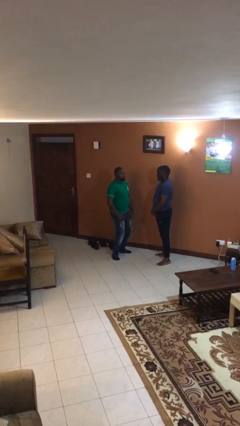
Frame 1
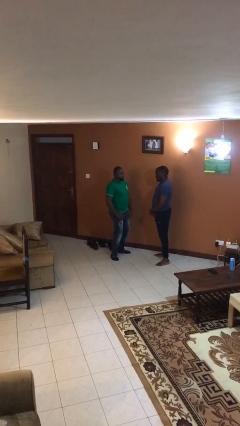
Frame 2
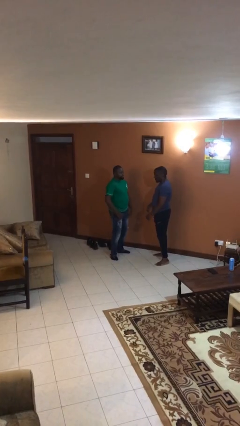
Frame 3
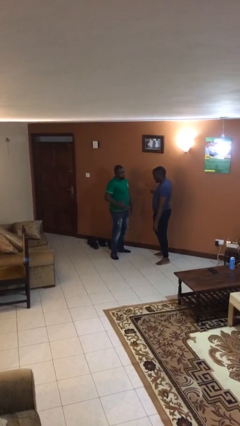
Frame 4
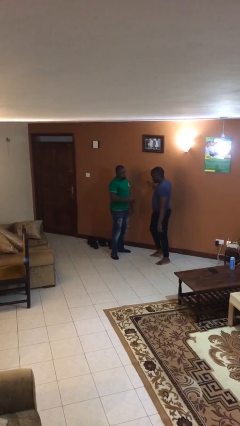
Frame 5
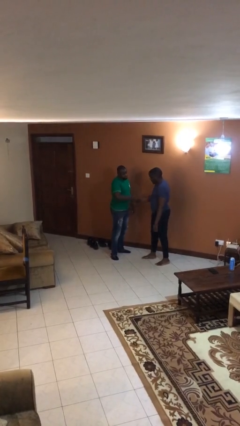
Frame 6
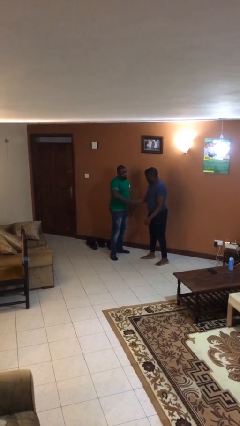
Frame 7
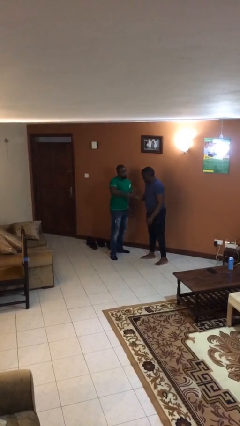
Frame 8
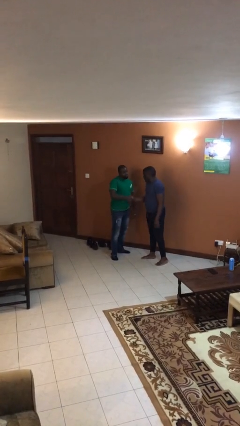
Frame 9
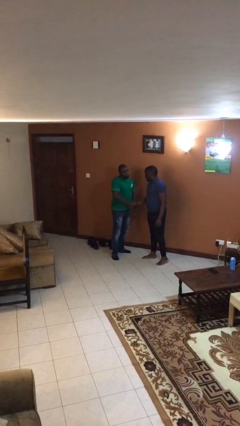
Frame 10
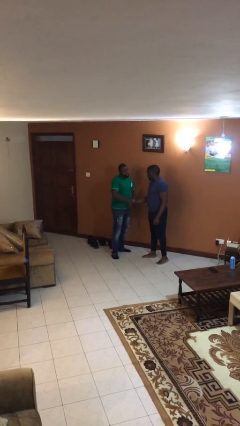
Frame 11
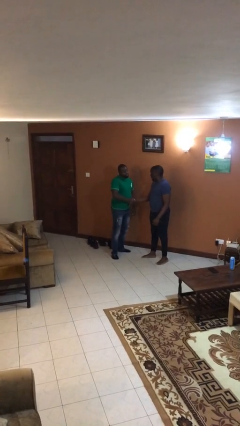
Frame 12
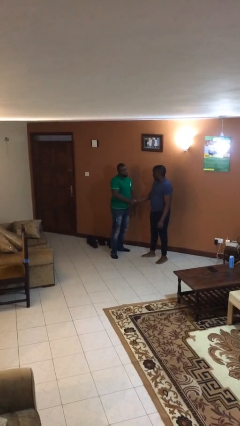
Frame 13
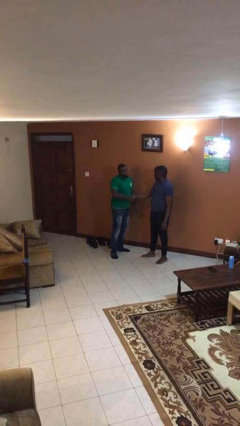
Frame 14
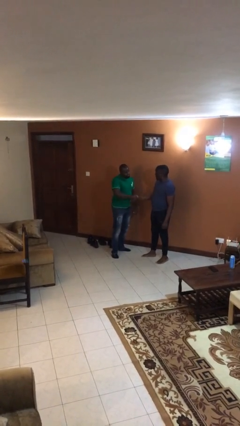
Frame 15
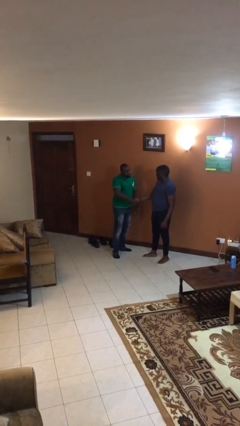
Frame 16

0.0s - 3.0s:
person shakes hand

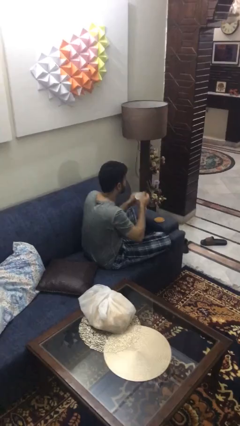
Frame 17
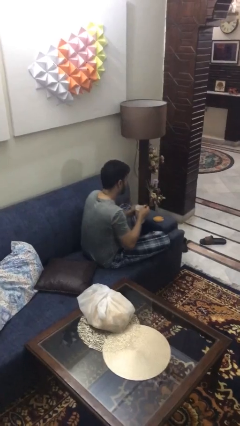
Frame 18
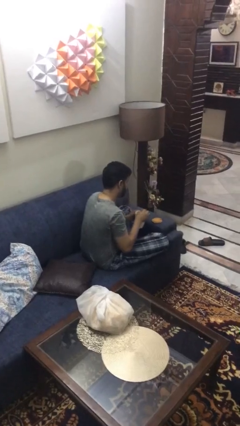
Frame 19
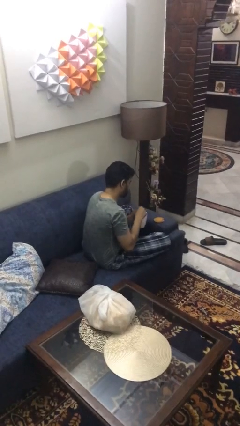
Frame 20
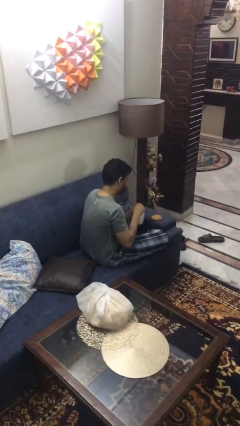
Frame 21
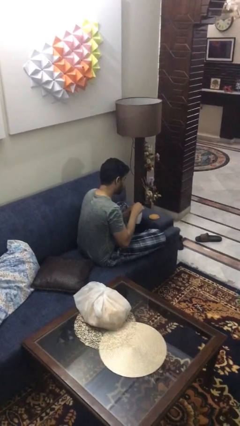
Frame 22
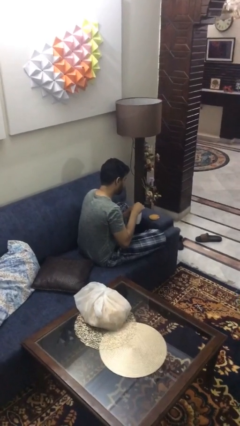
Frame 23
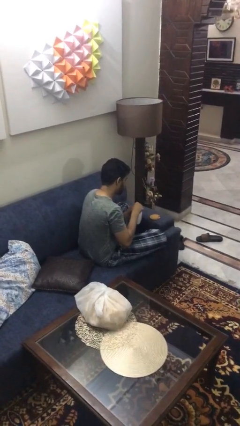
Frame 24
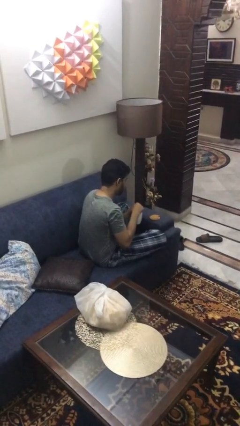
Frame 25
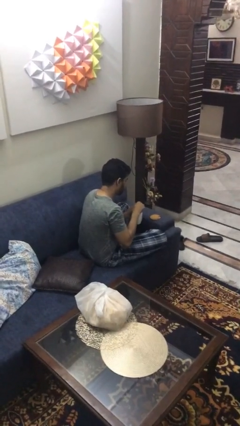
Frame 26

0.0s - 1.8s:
person stirs mug

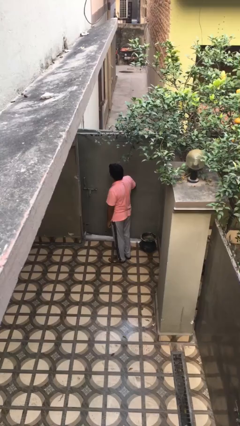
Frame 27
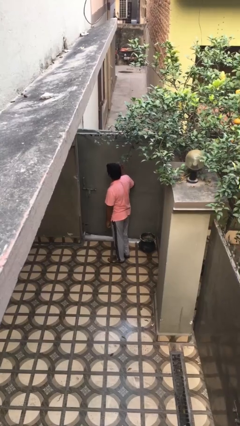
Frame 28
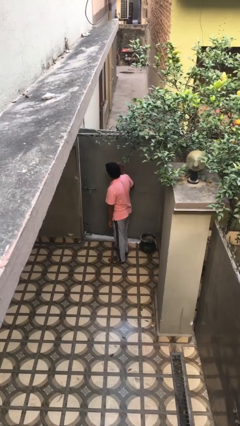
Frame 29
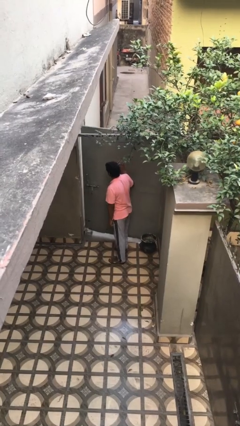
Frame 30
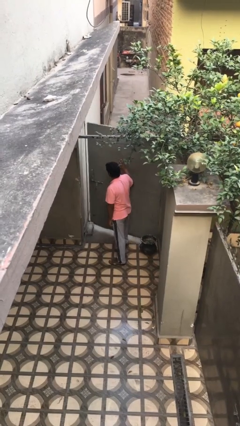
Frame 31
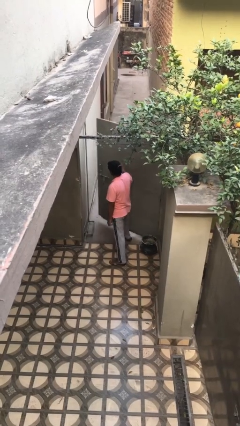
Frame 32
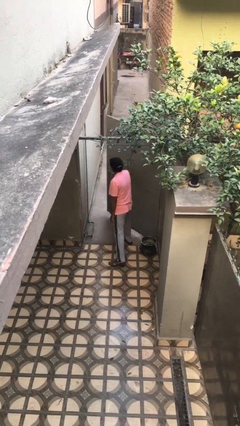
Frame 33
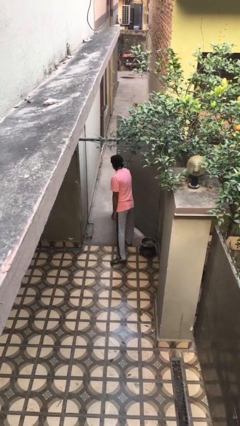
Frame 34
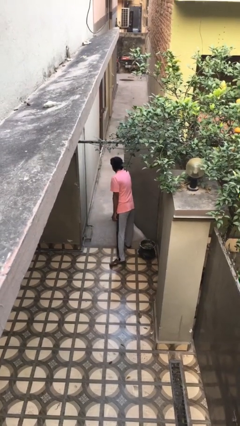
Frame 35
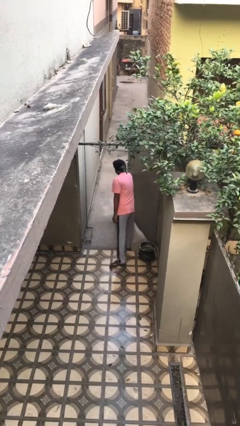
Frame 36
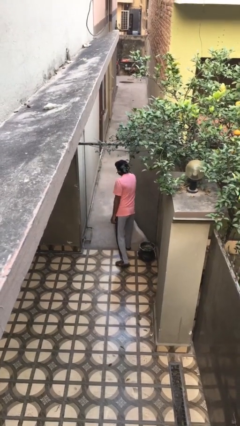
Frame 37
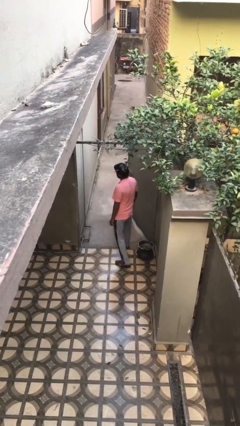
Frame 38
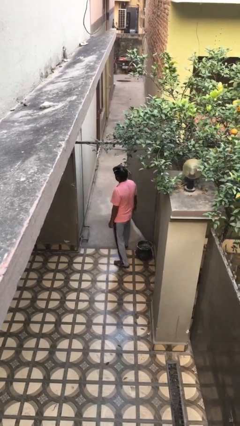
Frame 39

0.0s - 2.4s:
person opens facility door

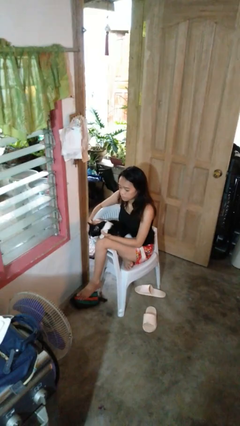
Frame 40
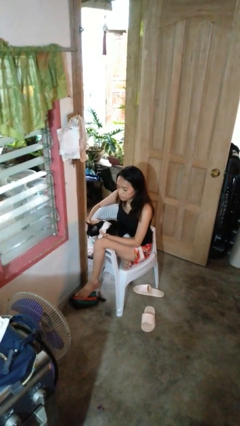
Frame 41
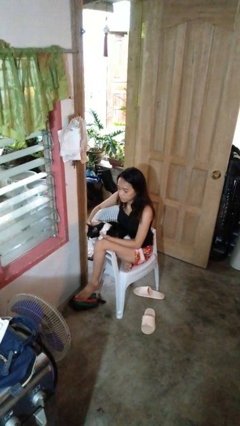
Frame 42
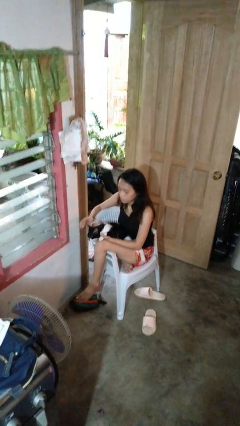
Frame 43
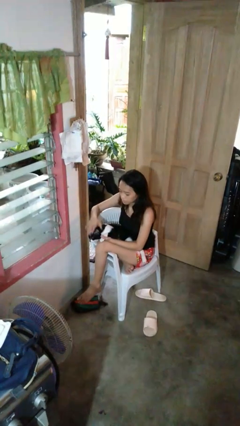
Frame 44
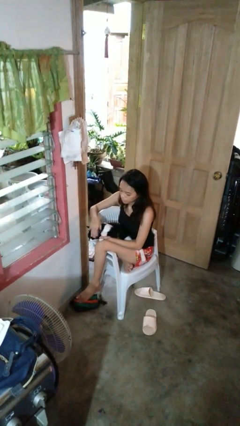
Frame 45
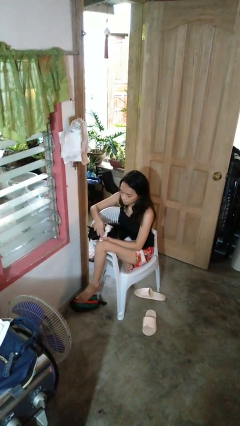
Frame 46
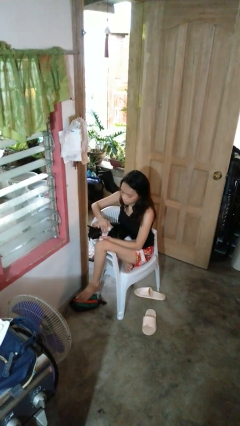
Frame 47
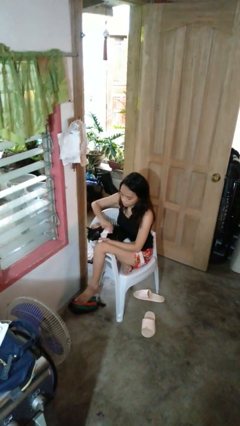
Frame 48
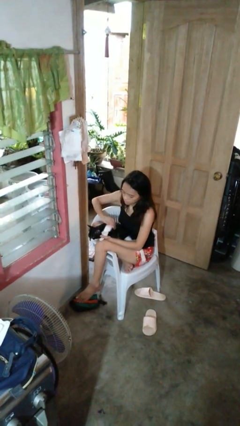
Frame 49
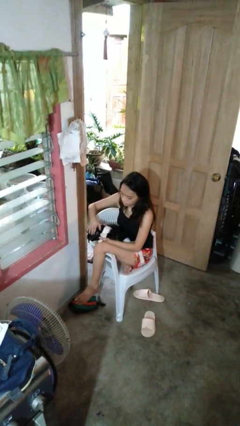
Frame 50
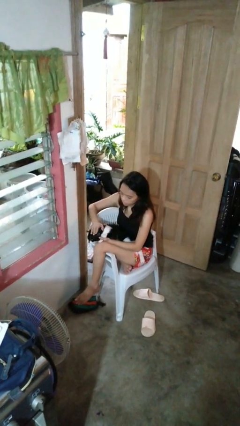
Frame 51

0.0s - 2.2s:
person pets cat

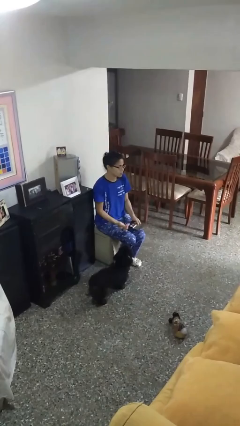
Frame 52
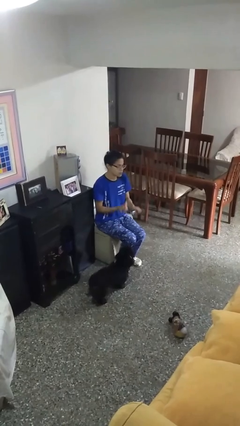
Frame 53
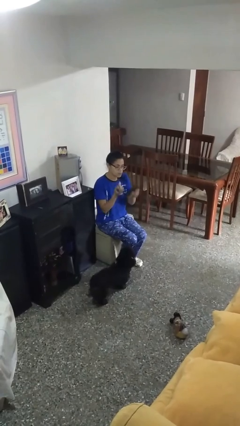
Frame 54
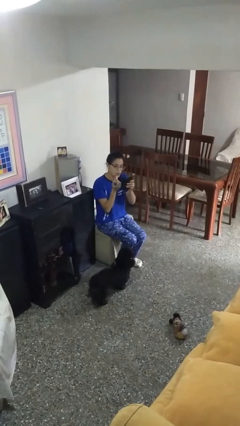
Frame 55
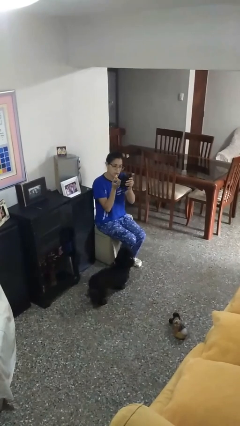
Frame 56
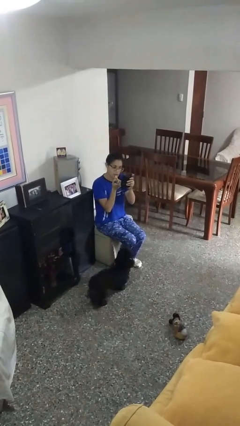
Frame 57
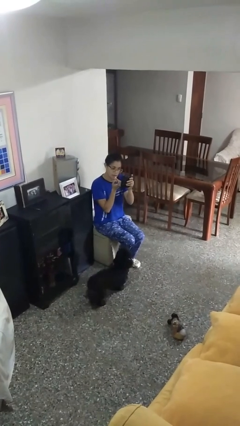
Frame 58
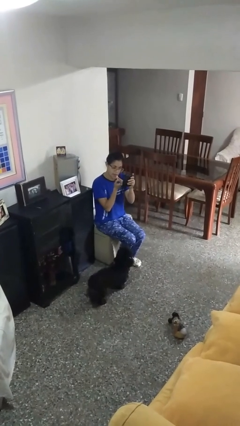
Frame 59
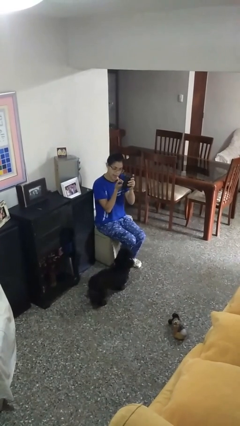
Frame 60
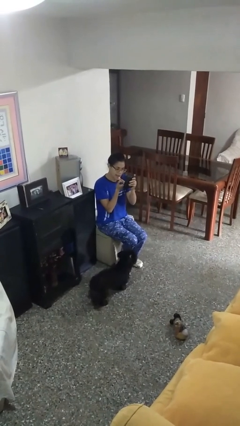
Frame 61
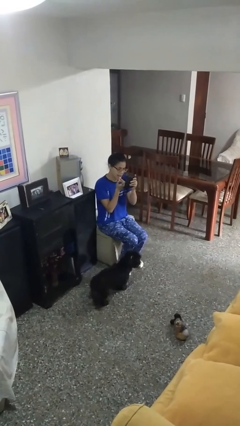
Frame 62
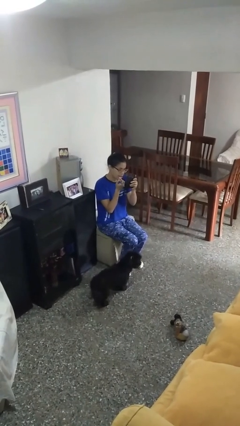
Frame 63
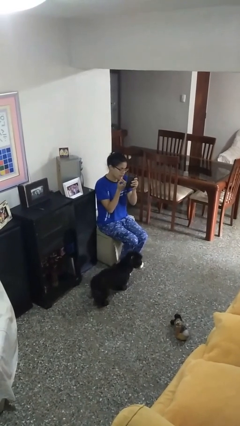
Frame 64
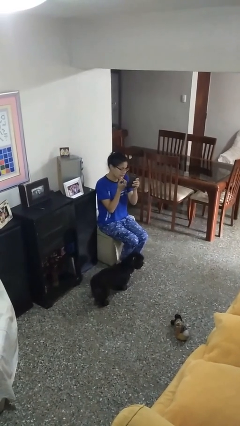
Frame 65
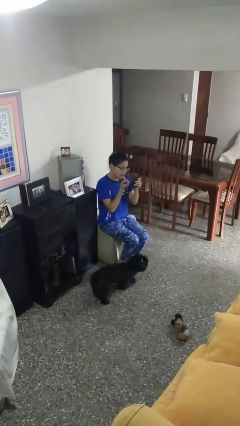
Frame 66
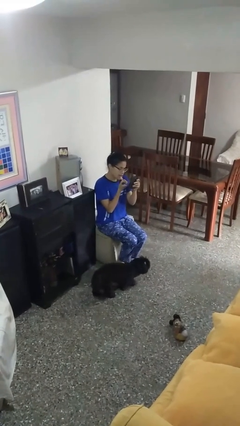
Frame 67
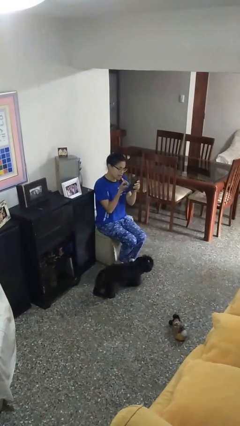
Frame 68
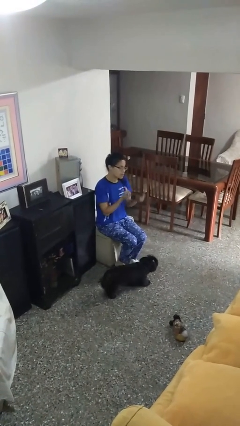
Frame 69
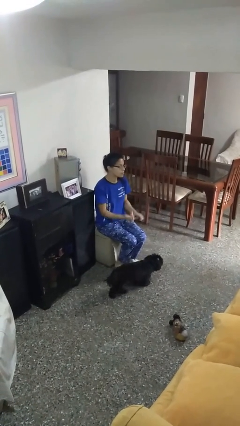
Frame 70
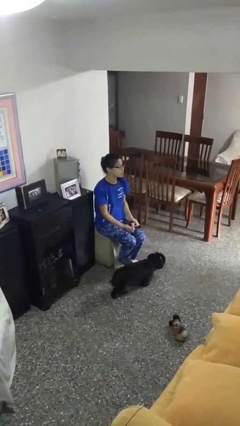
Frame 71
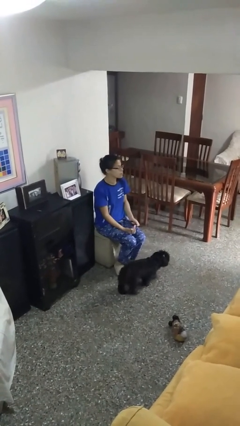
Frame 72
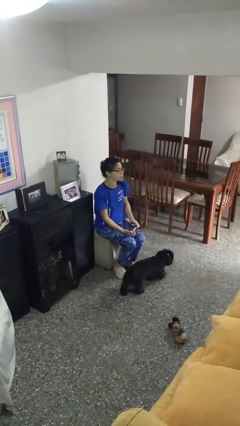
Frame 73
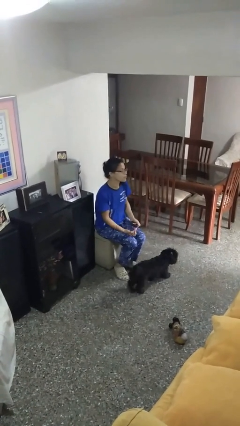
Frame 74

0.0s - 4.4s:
person applies lip makeup

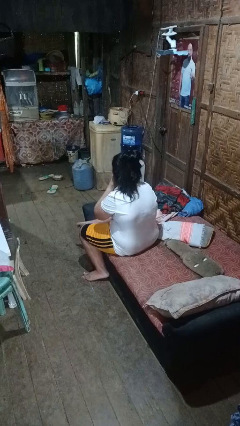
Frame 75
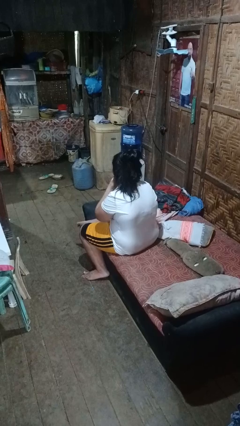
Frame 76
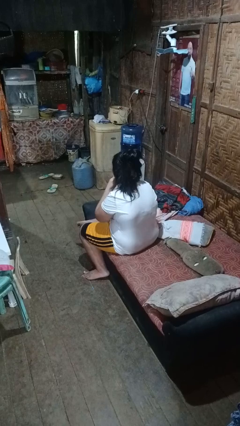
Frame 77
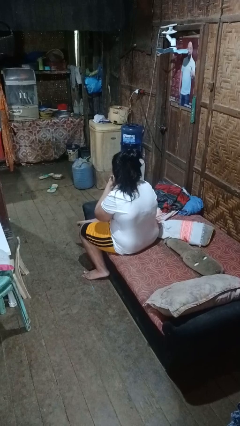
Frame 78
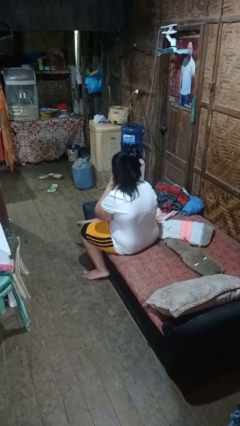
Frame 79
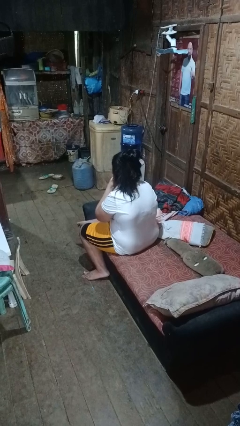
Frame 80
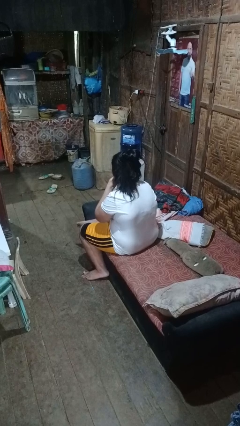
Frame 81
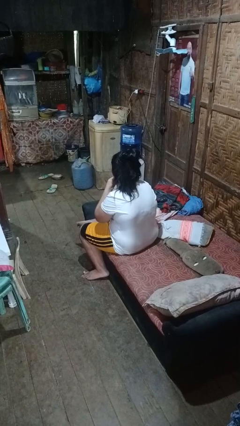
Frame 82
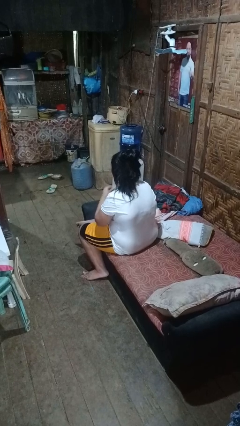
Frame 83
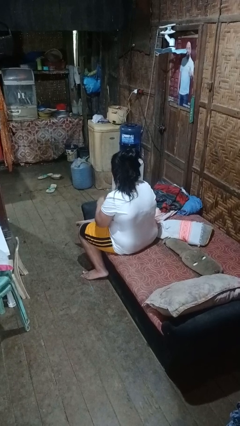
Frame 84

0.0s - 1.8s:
person strokes chin

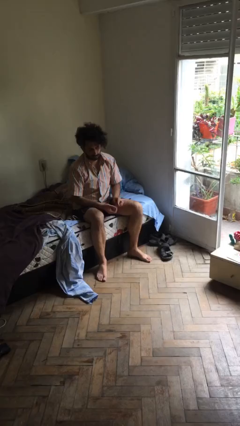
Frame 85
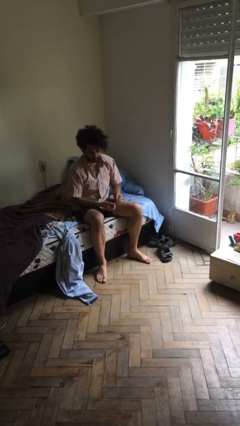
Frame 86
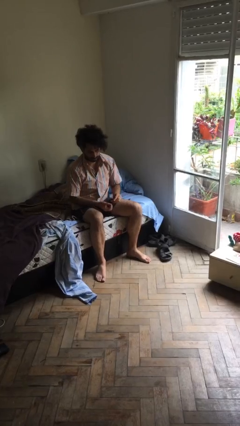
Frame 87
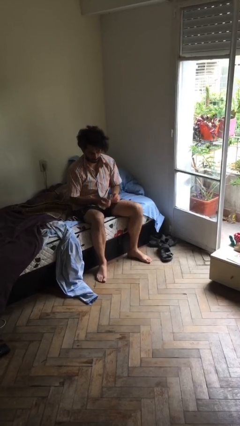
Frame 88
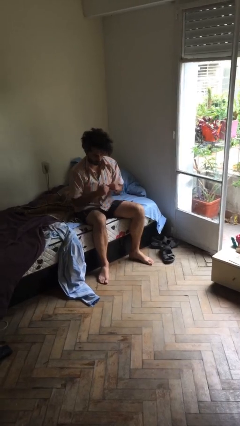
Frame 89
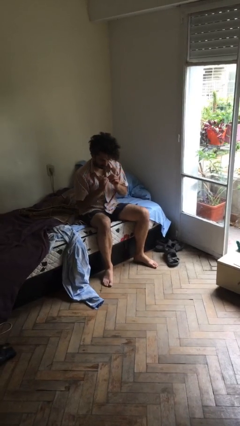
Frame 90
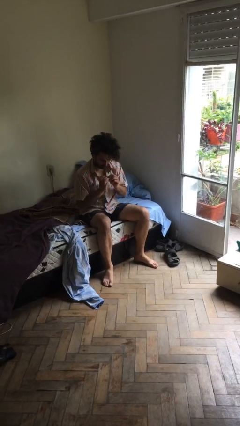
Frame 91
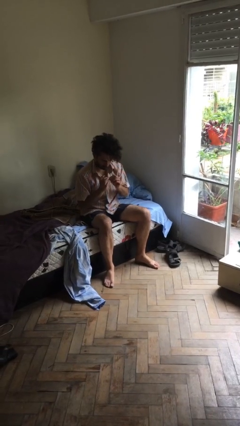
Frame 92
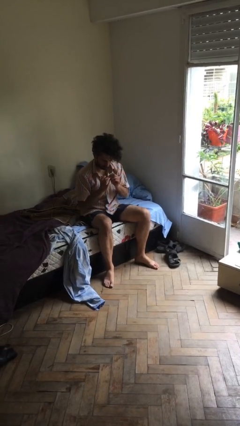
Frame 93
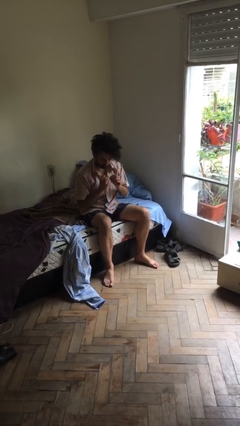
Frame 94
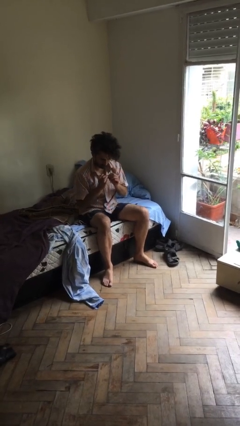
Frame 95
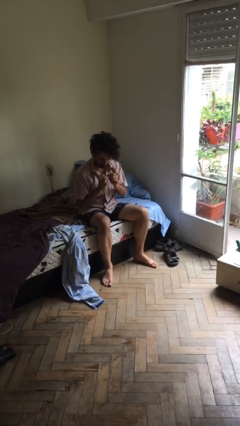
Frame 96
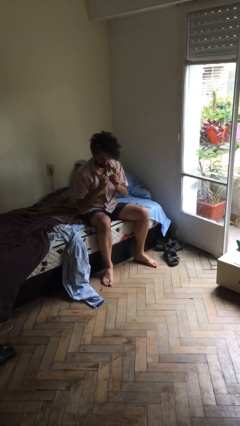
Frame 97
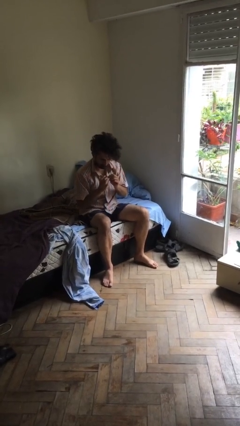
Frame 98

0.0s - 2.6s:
person files fingernails
